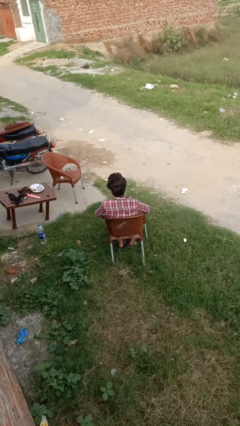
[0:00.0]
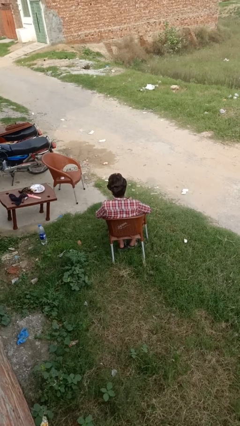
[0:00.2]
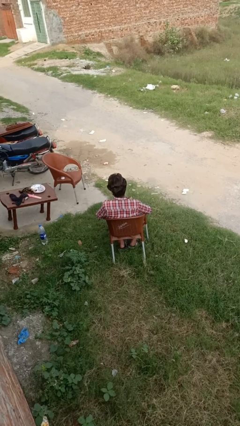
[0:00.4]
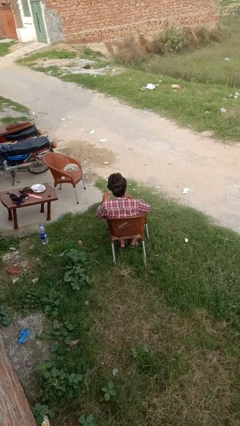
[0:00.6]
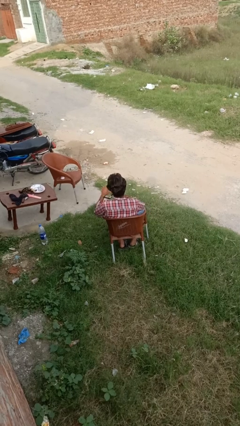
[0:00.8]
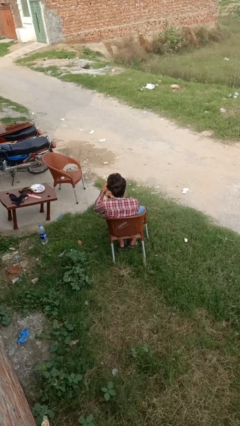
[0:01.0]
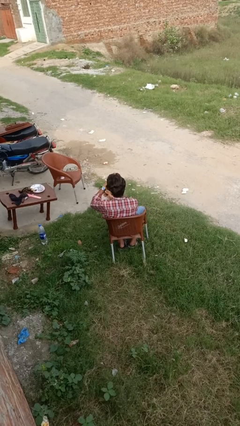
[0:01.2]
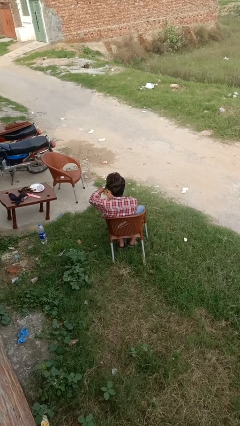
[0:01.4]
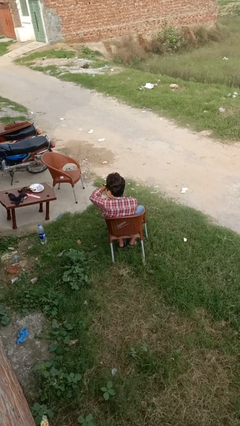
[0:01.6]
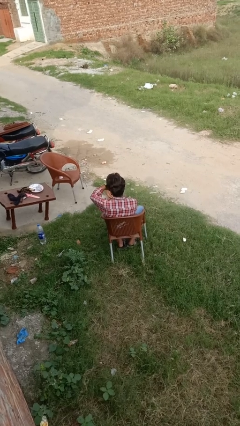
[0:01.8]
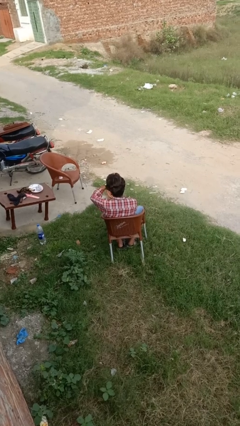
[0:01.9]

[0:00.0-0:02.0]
person puts on wristwatch

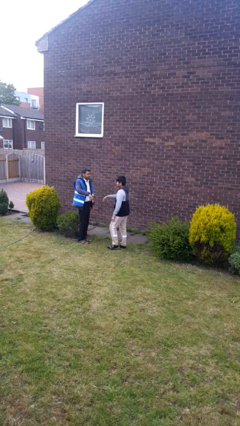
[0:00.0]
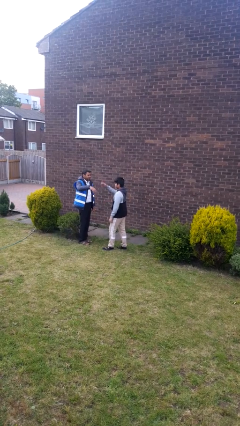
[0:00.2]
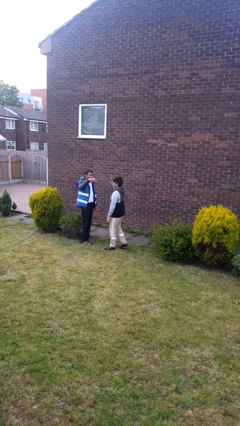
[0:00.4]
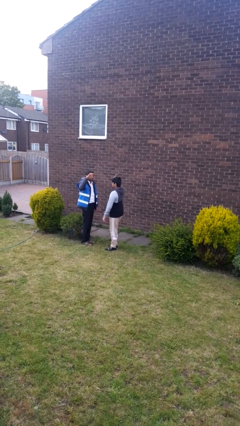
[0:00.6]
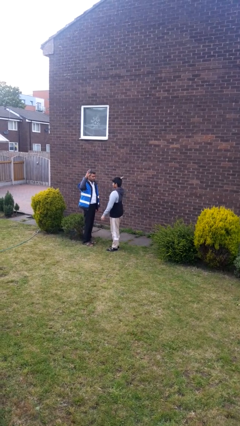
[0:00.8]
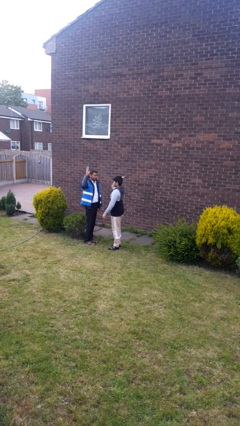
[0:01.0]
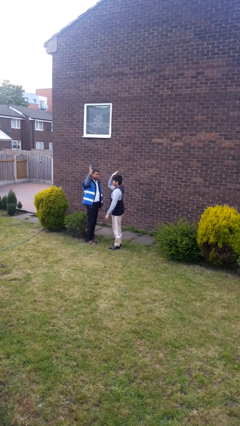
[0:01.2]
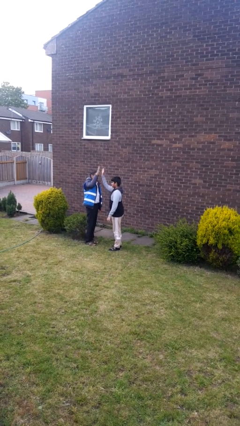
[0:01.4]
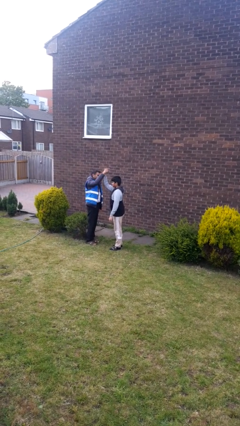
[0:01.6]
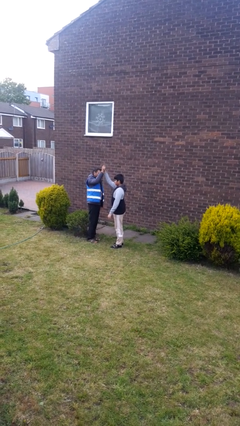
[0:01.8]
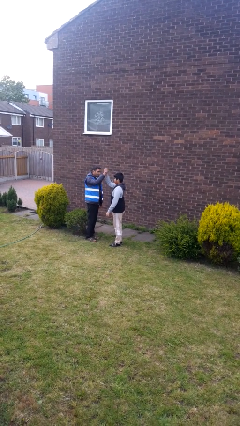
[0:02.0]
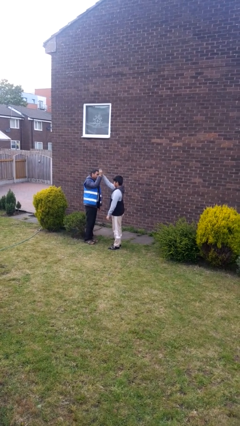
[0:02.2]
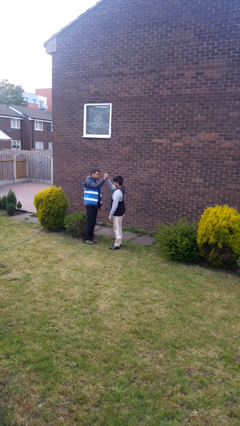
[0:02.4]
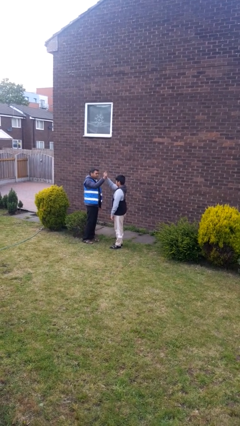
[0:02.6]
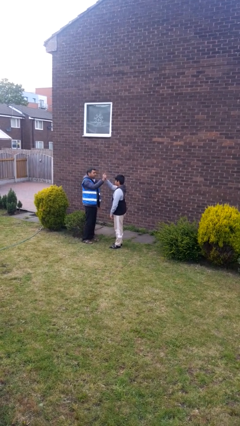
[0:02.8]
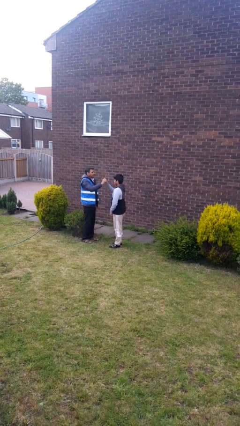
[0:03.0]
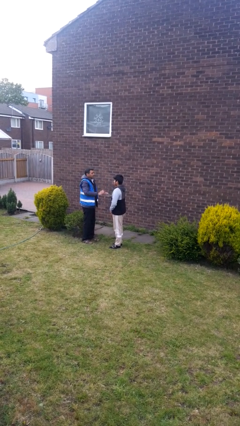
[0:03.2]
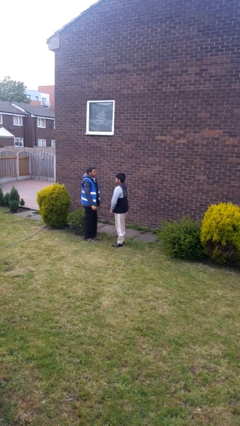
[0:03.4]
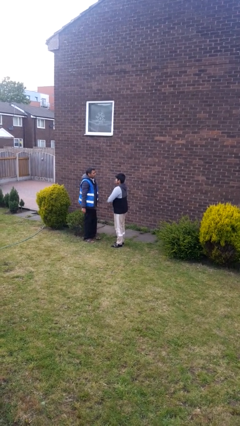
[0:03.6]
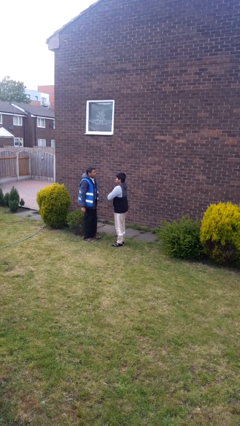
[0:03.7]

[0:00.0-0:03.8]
person highfives hand

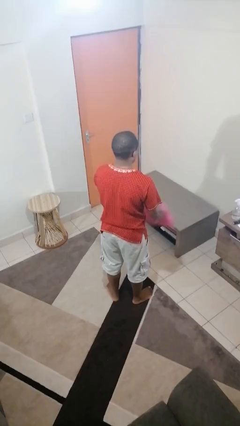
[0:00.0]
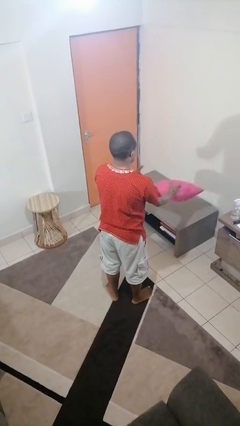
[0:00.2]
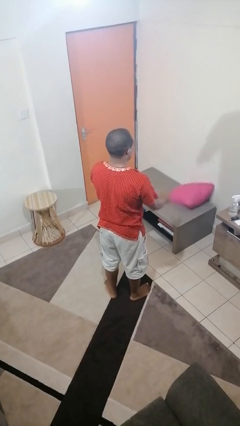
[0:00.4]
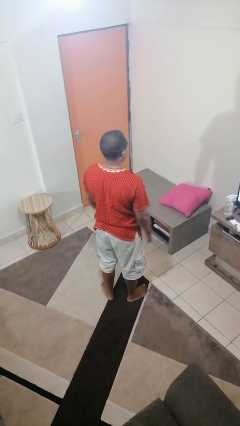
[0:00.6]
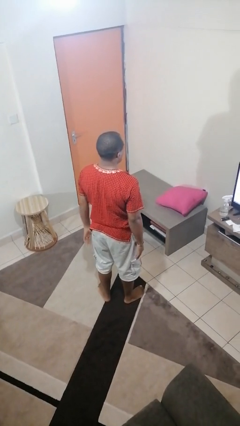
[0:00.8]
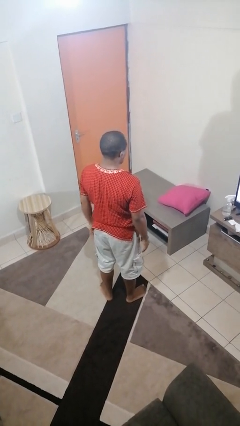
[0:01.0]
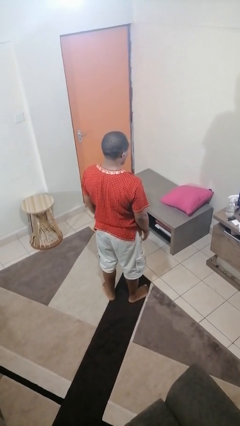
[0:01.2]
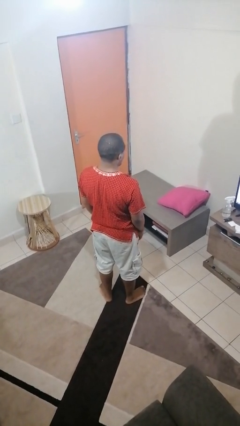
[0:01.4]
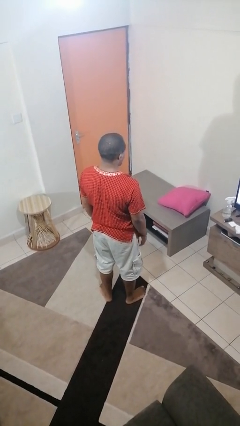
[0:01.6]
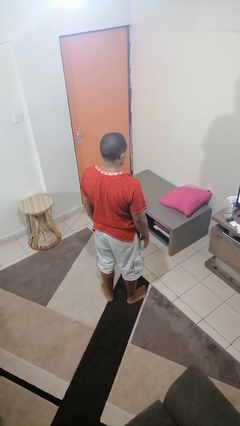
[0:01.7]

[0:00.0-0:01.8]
person throws object on table

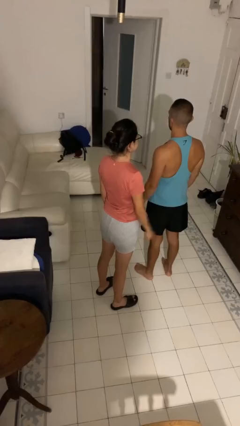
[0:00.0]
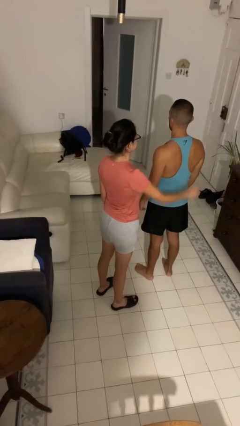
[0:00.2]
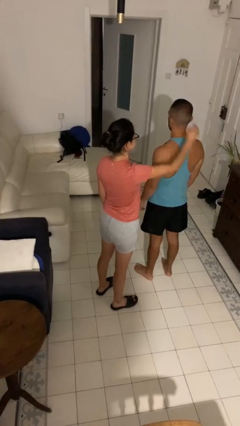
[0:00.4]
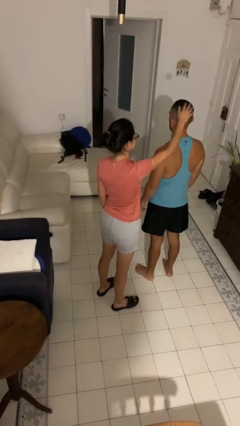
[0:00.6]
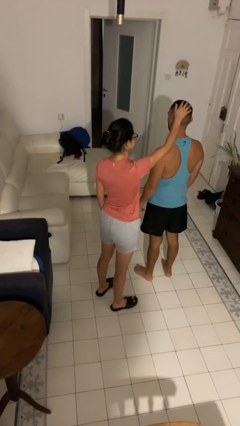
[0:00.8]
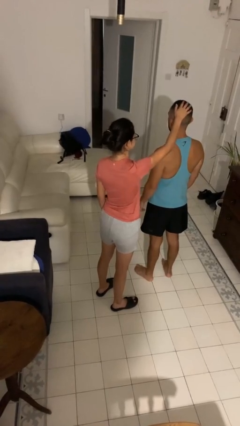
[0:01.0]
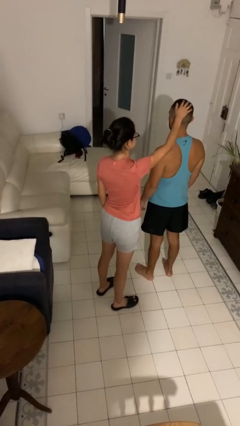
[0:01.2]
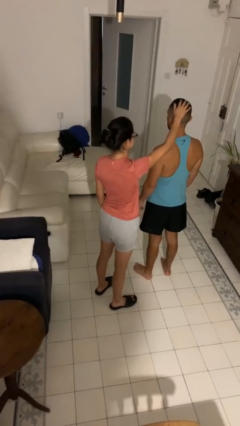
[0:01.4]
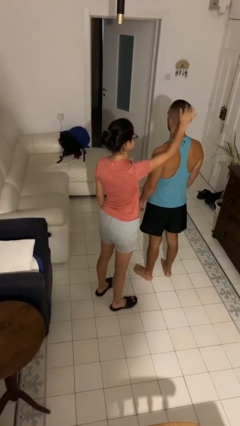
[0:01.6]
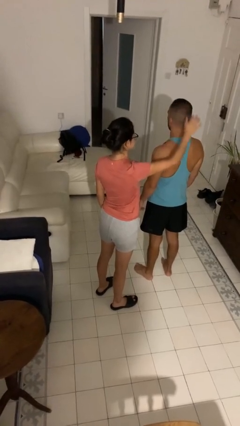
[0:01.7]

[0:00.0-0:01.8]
person grabs person by hair

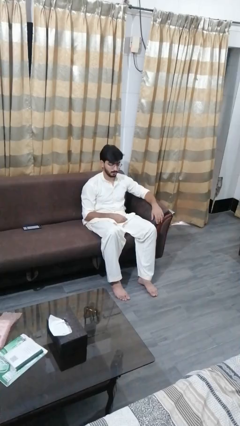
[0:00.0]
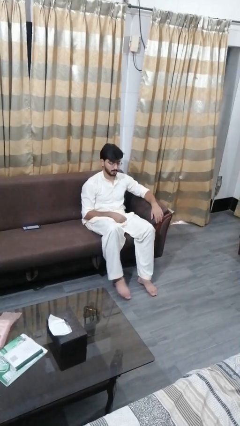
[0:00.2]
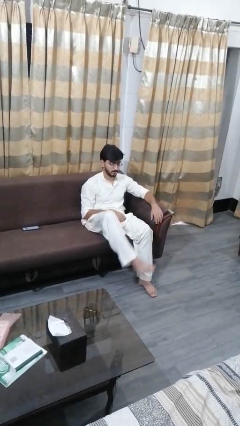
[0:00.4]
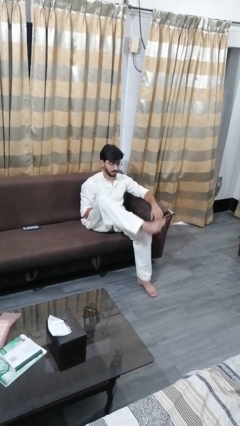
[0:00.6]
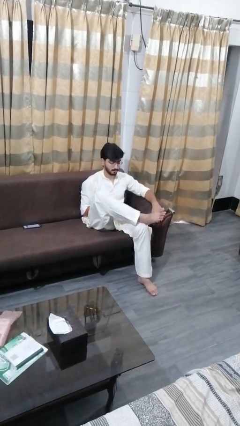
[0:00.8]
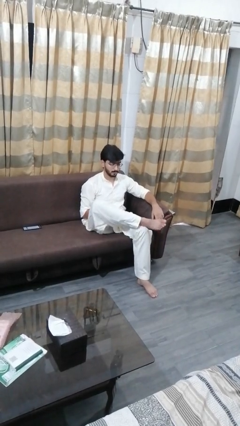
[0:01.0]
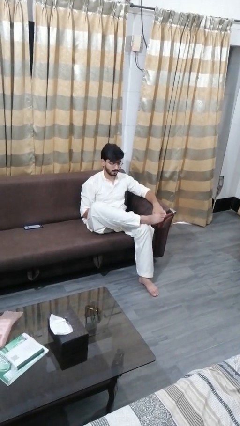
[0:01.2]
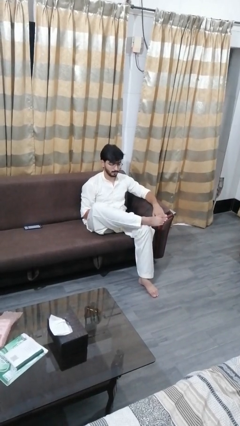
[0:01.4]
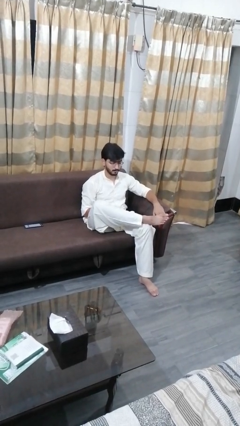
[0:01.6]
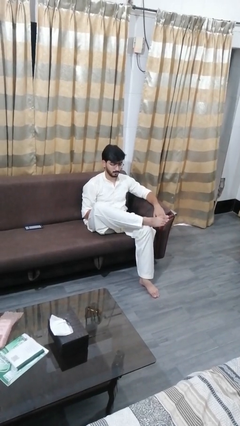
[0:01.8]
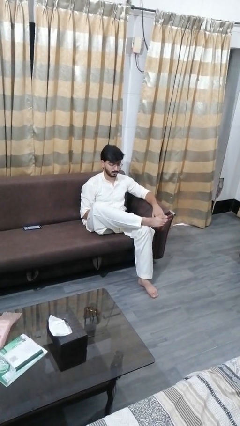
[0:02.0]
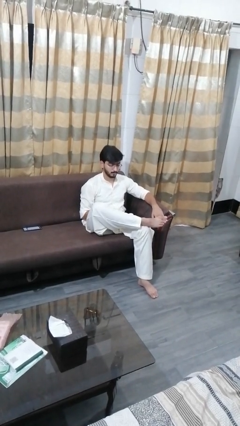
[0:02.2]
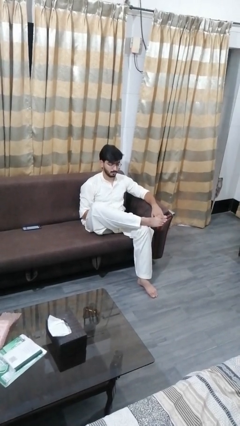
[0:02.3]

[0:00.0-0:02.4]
person crosses legs

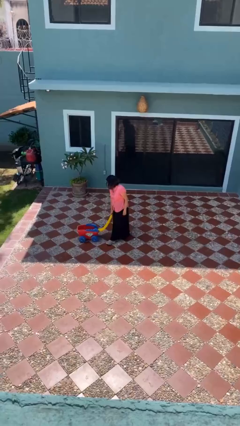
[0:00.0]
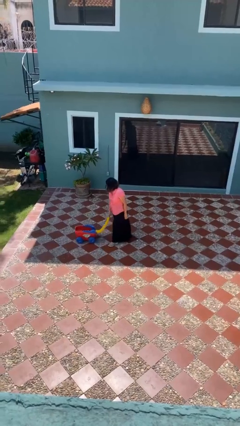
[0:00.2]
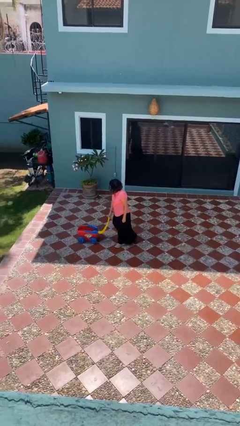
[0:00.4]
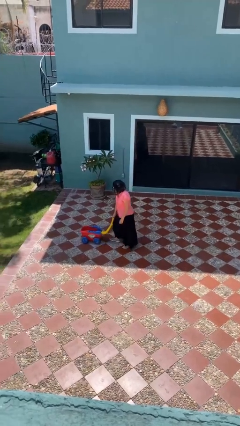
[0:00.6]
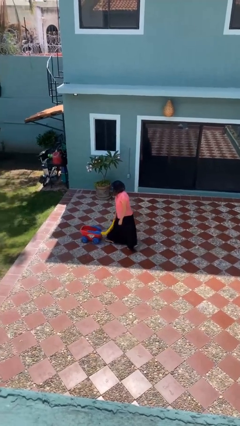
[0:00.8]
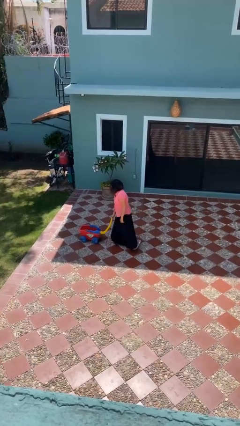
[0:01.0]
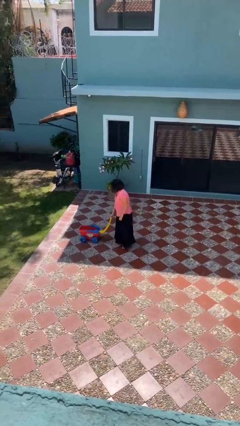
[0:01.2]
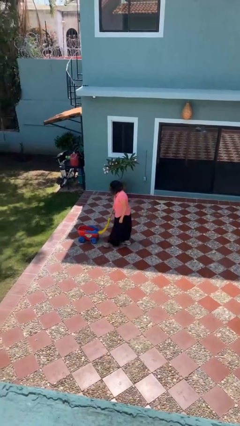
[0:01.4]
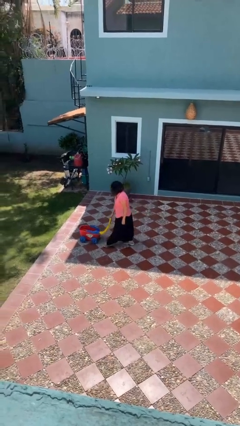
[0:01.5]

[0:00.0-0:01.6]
person pushes wheeled cart

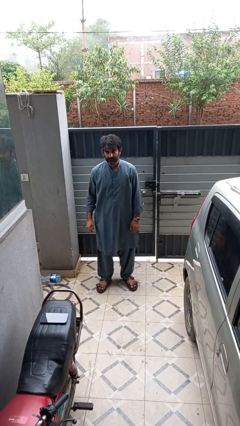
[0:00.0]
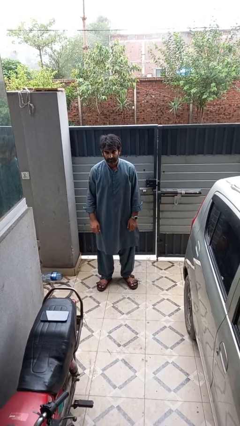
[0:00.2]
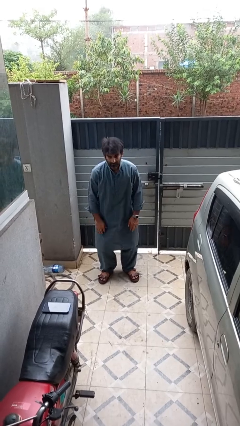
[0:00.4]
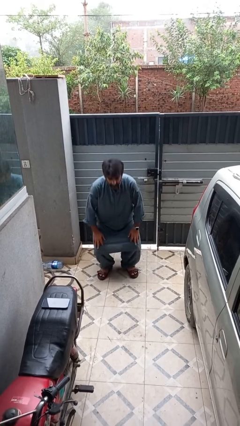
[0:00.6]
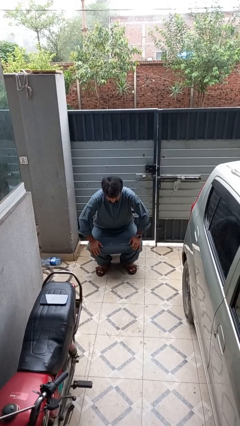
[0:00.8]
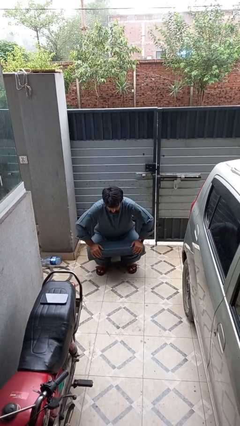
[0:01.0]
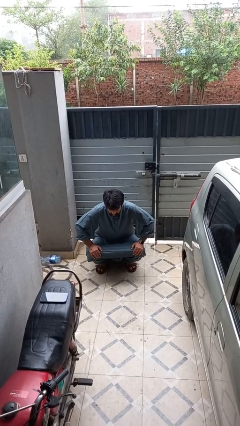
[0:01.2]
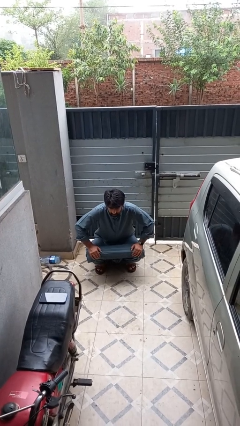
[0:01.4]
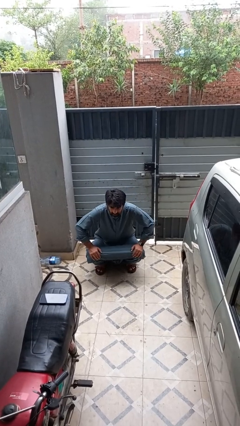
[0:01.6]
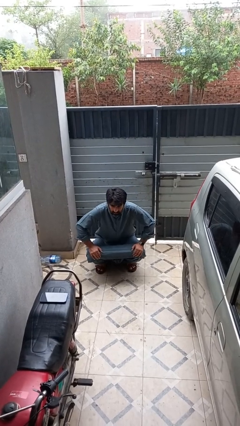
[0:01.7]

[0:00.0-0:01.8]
person squats

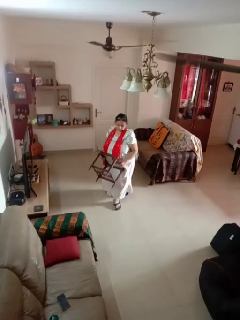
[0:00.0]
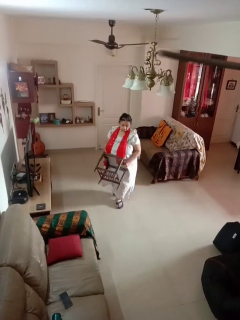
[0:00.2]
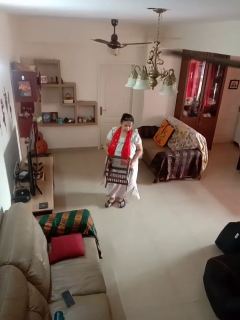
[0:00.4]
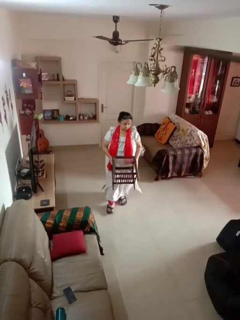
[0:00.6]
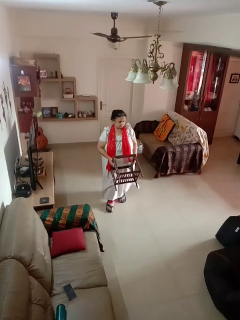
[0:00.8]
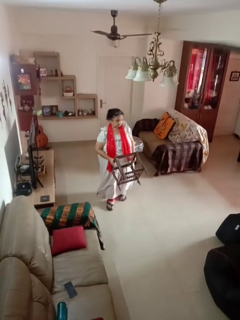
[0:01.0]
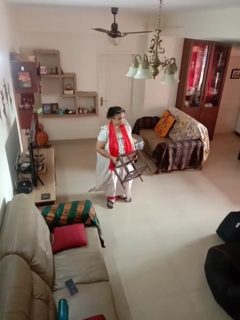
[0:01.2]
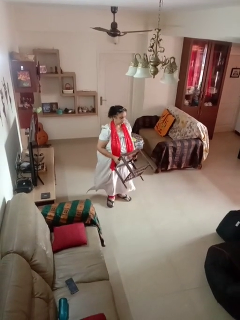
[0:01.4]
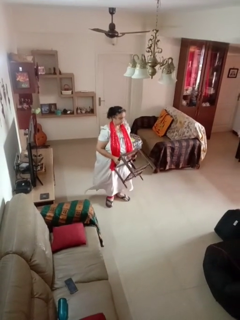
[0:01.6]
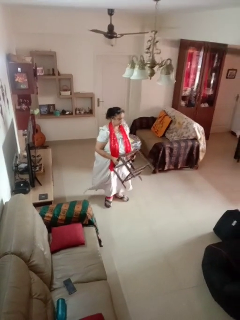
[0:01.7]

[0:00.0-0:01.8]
person carries furniture
